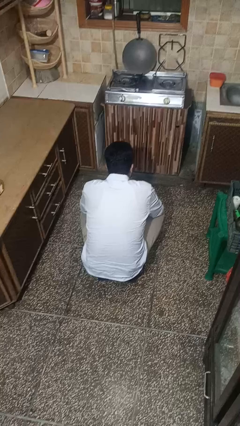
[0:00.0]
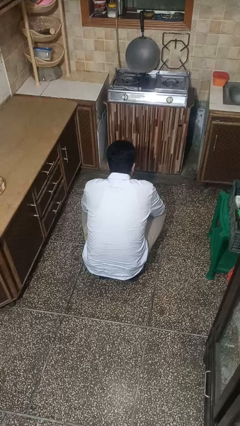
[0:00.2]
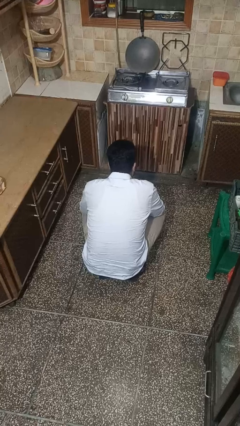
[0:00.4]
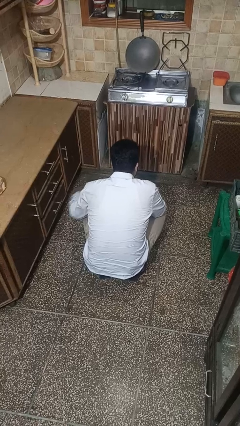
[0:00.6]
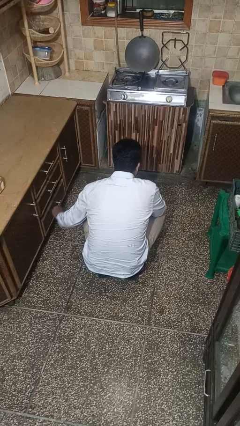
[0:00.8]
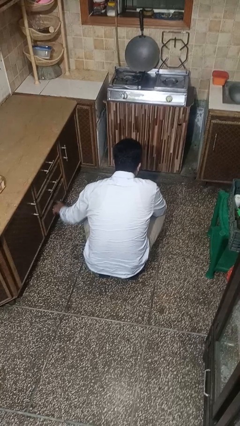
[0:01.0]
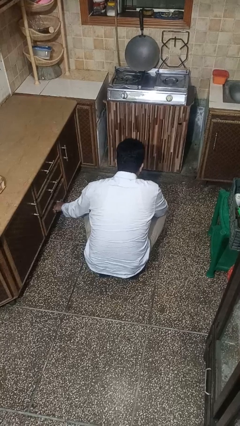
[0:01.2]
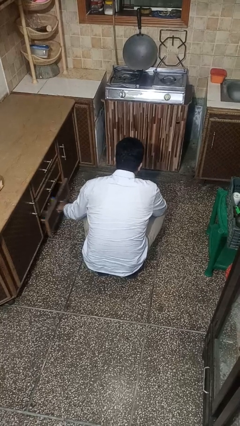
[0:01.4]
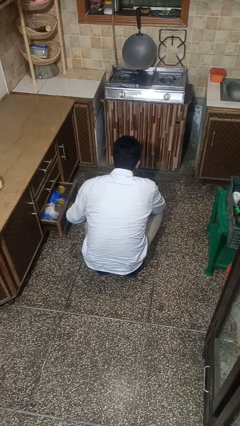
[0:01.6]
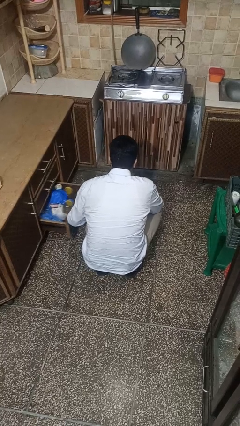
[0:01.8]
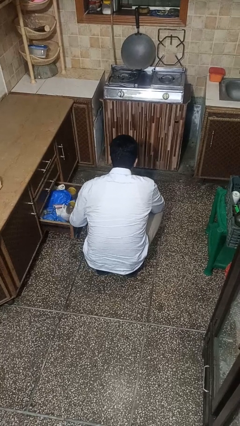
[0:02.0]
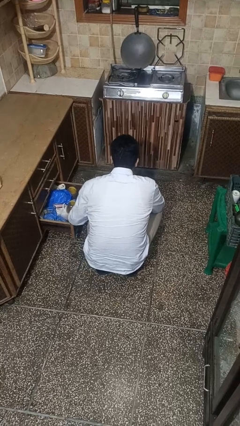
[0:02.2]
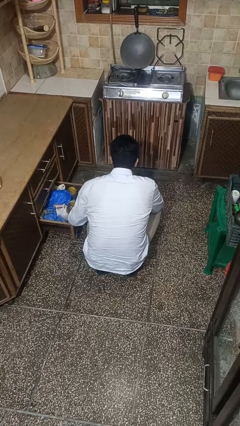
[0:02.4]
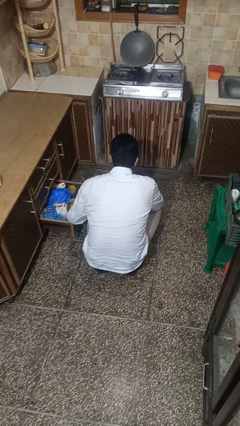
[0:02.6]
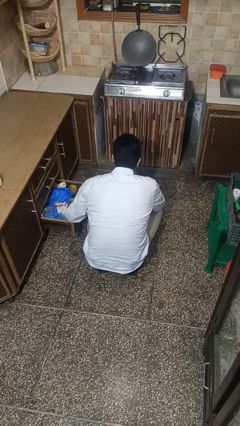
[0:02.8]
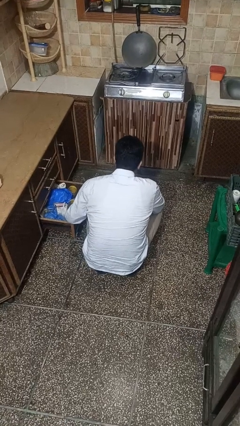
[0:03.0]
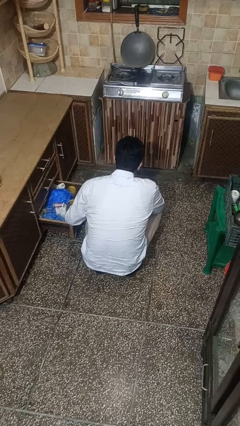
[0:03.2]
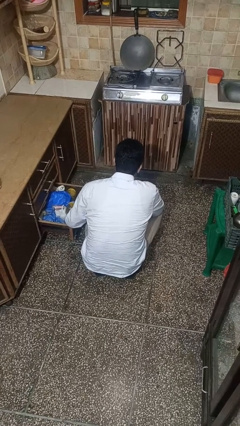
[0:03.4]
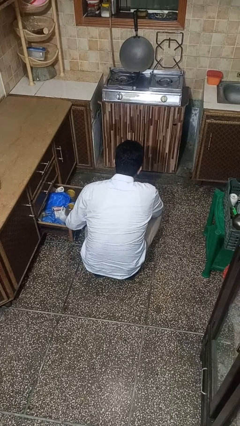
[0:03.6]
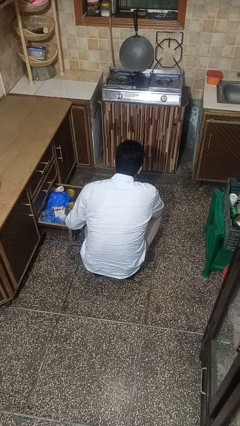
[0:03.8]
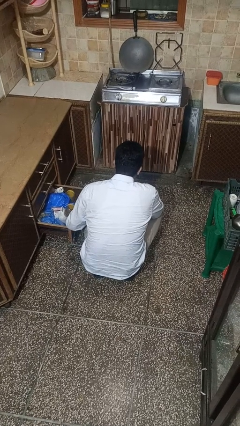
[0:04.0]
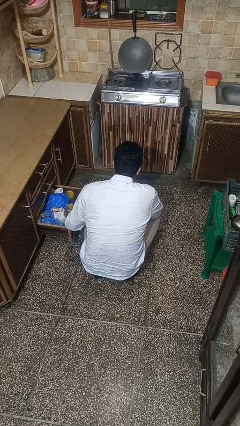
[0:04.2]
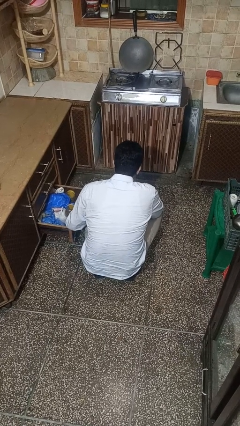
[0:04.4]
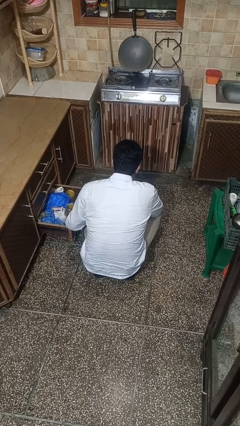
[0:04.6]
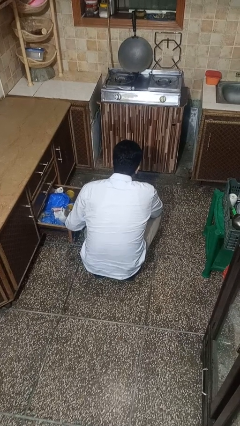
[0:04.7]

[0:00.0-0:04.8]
person opens kitchen drawer

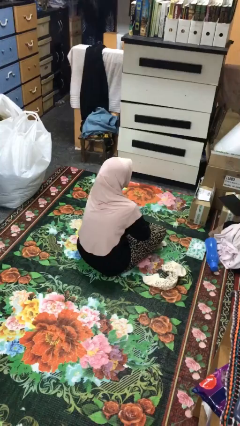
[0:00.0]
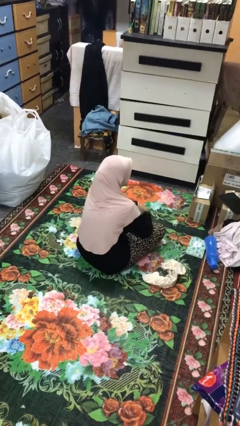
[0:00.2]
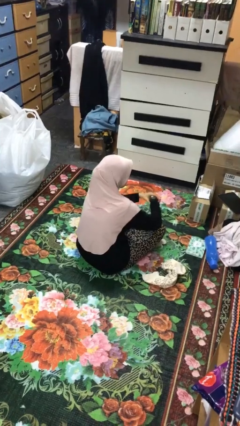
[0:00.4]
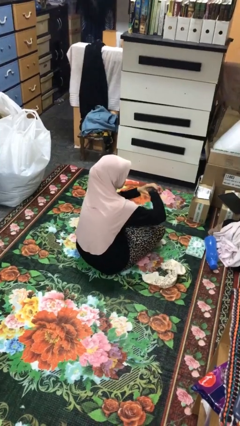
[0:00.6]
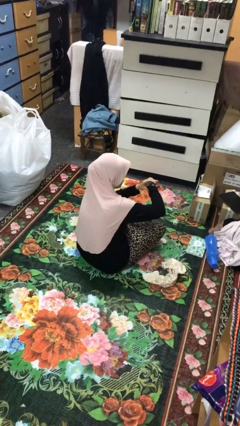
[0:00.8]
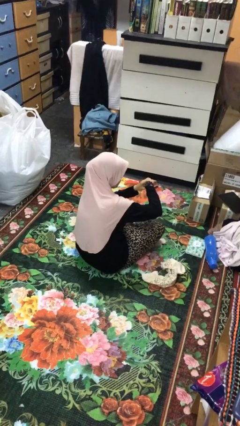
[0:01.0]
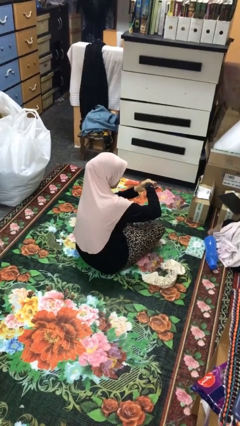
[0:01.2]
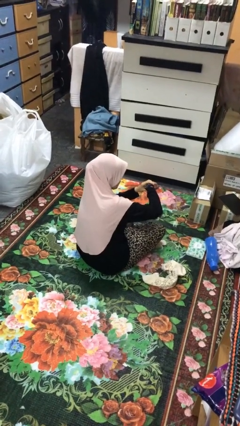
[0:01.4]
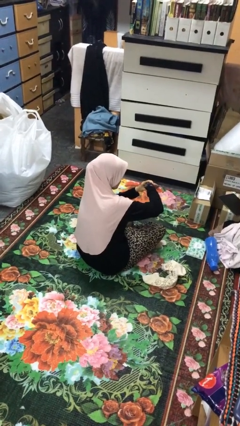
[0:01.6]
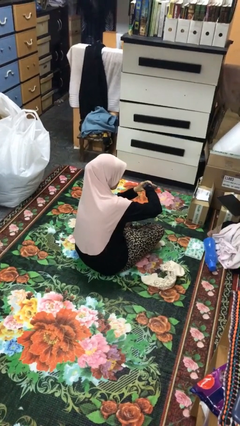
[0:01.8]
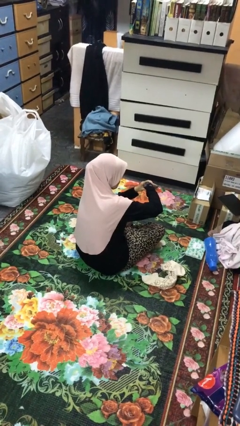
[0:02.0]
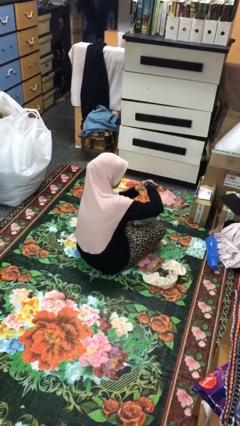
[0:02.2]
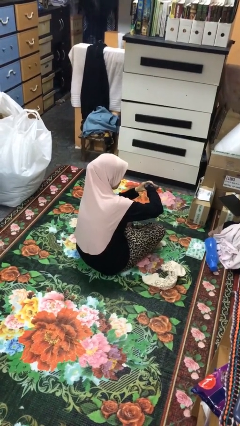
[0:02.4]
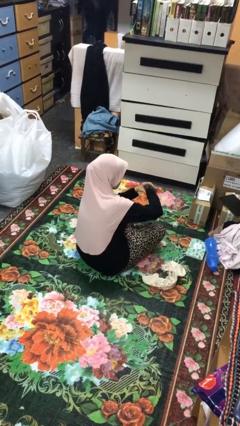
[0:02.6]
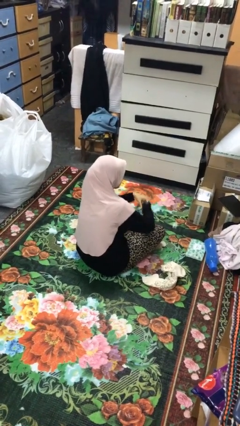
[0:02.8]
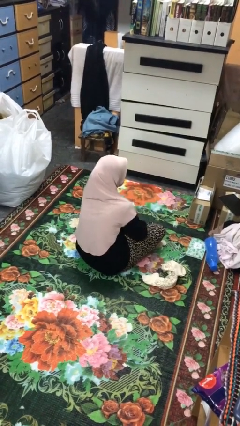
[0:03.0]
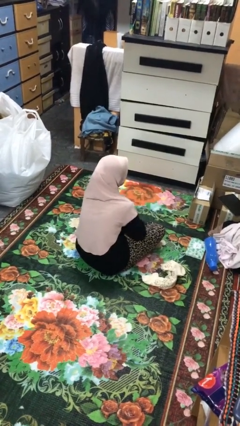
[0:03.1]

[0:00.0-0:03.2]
person looks at wristwatch

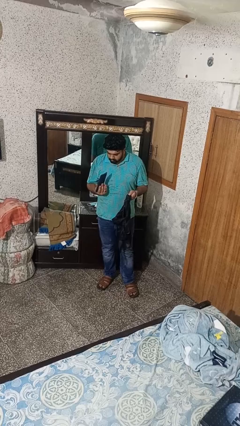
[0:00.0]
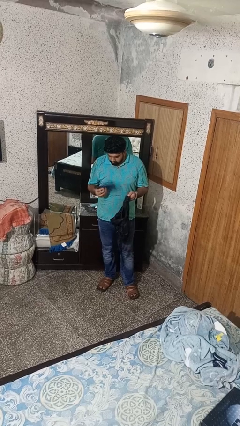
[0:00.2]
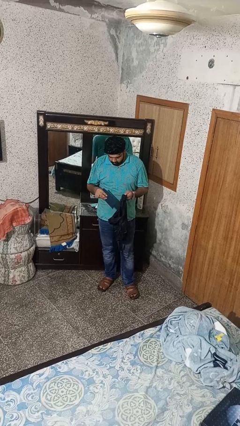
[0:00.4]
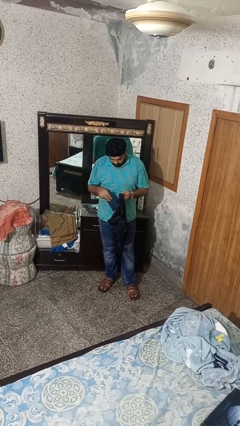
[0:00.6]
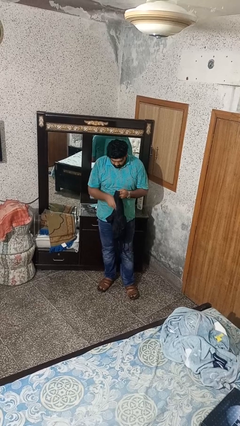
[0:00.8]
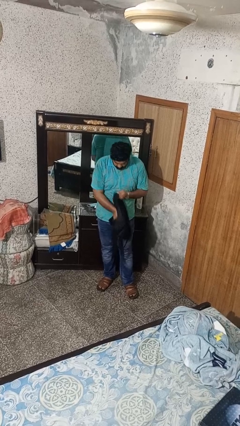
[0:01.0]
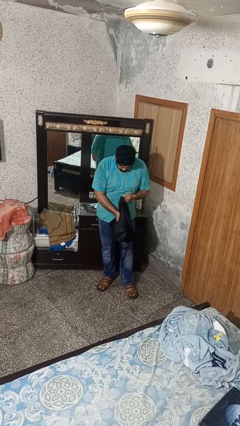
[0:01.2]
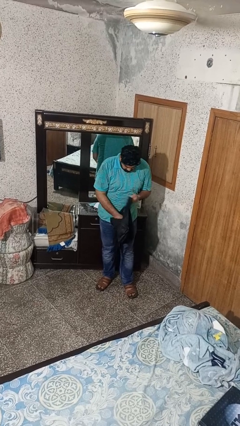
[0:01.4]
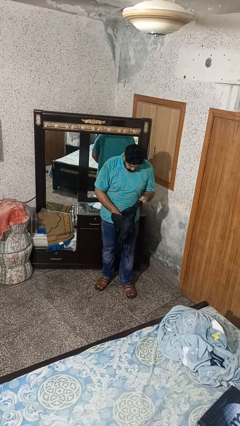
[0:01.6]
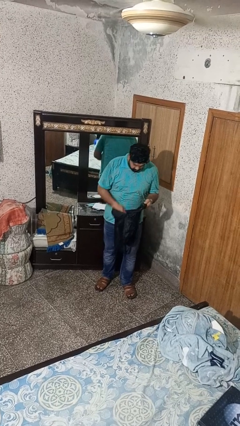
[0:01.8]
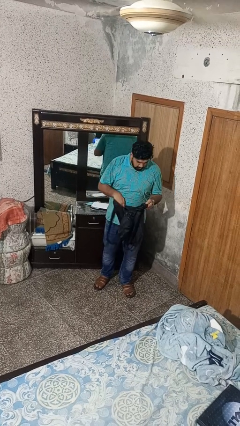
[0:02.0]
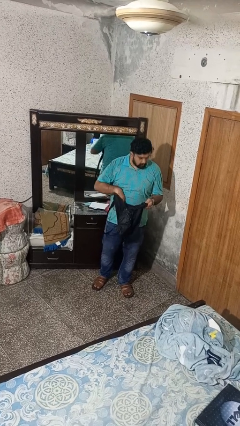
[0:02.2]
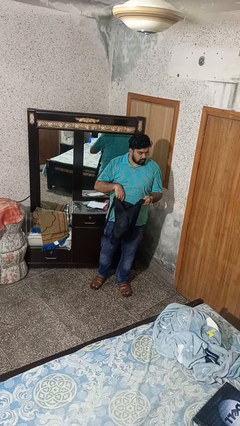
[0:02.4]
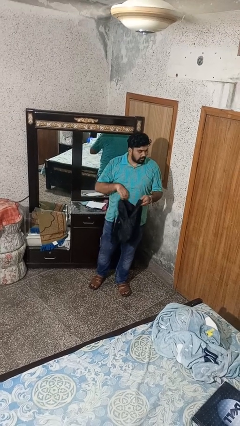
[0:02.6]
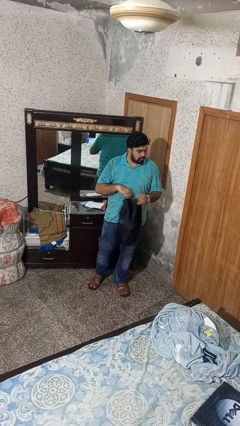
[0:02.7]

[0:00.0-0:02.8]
person puts object into backpack

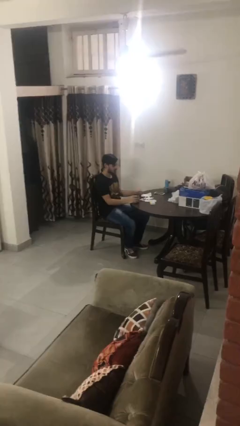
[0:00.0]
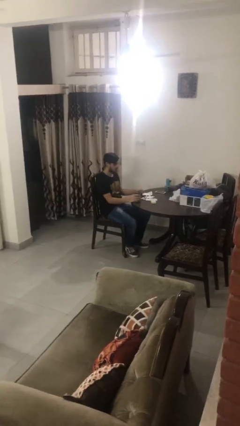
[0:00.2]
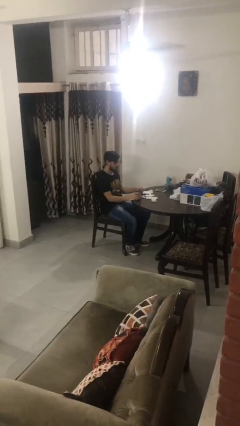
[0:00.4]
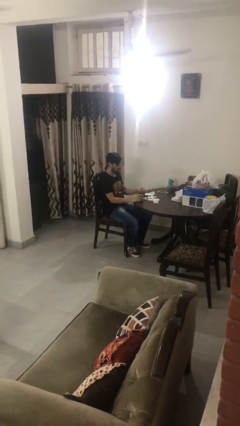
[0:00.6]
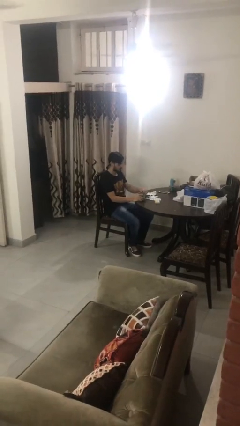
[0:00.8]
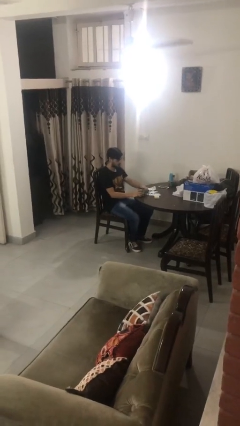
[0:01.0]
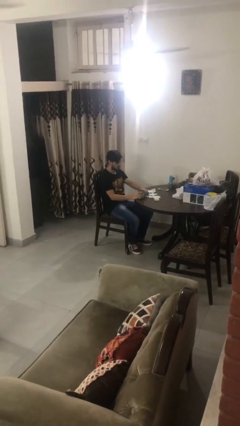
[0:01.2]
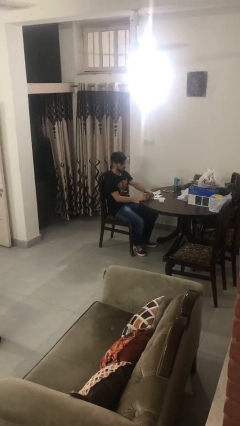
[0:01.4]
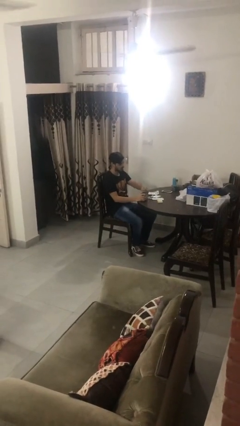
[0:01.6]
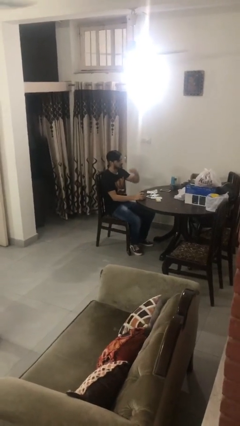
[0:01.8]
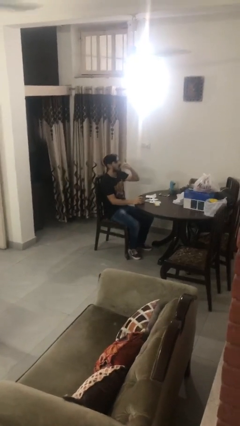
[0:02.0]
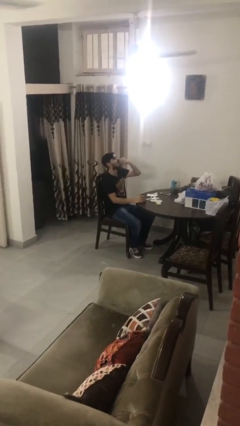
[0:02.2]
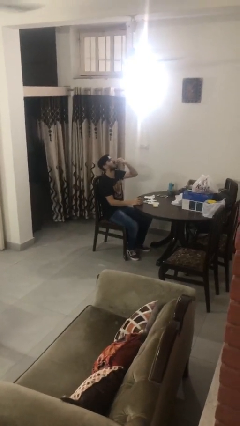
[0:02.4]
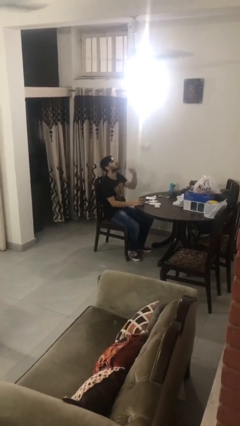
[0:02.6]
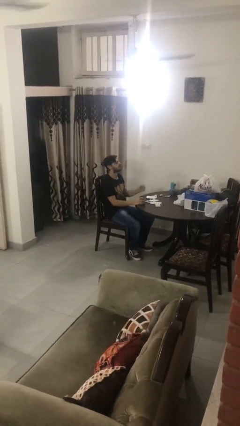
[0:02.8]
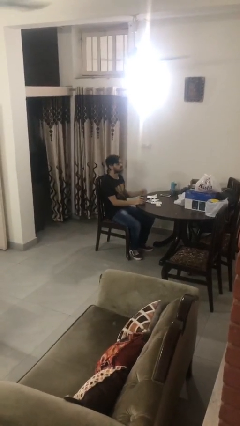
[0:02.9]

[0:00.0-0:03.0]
person takes medicine pills

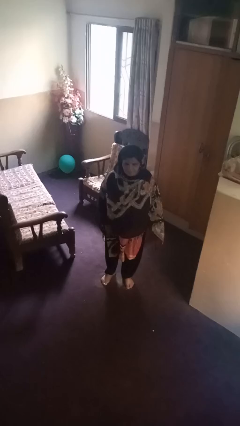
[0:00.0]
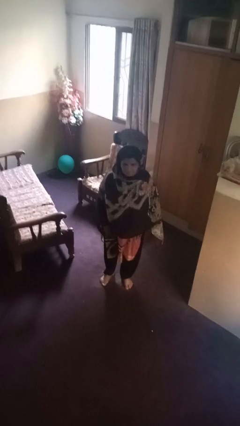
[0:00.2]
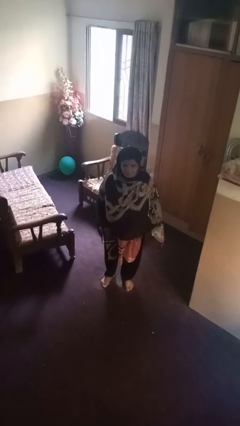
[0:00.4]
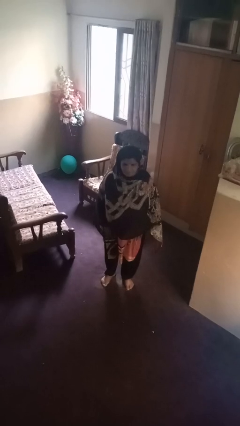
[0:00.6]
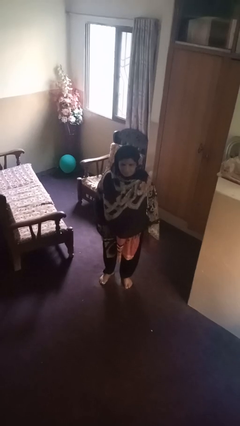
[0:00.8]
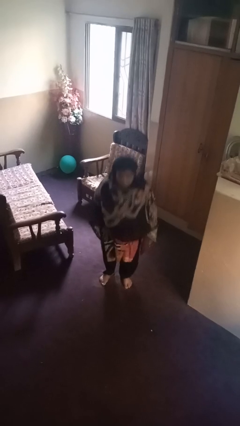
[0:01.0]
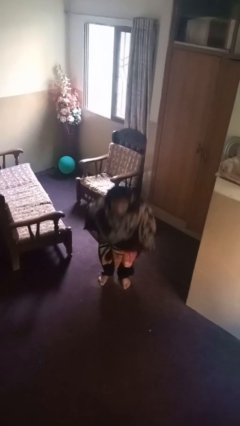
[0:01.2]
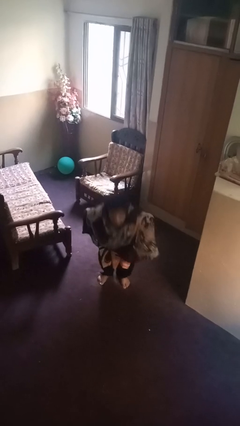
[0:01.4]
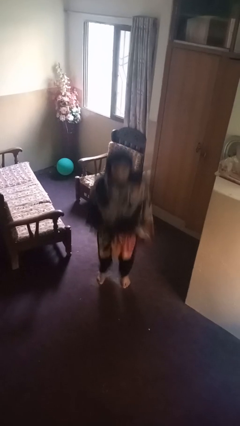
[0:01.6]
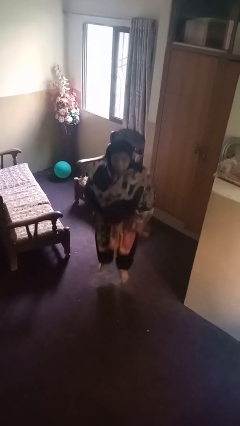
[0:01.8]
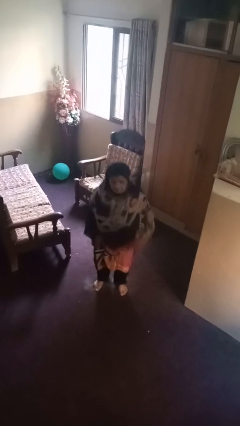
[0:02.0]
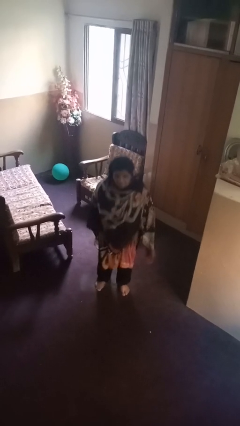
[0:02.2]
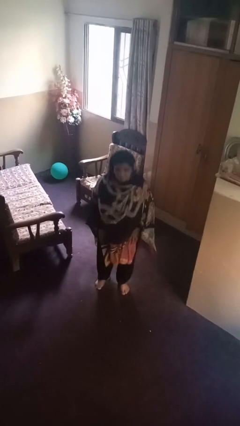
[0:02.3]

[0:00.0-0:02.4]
person jumps

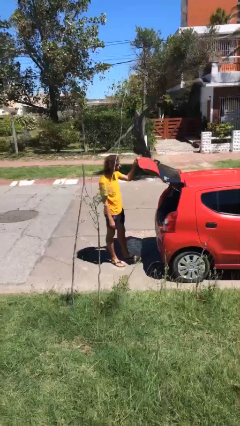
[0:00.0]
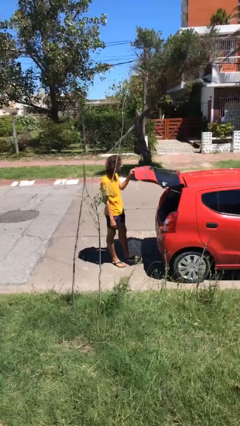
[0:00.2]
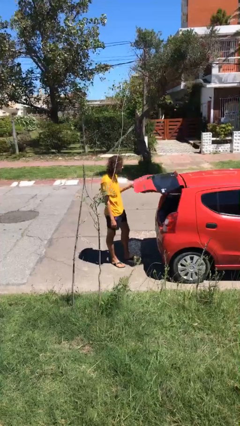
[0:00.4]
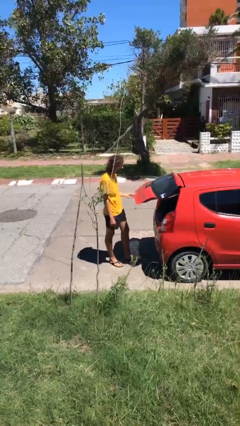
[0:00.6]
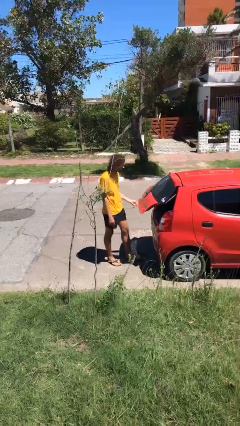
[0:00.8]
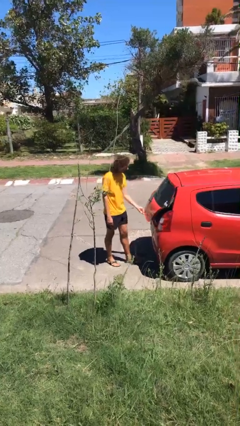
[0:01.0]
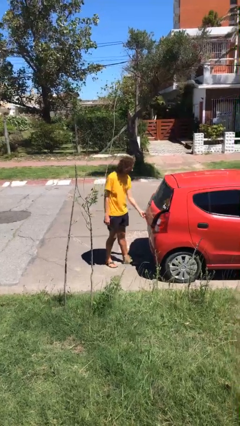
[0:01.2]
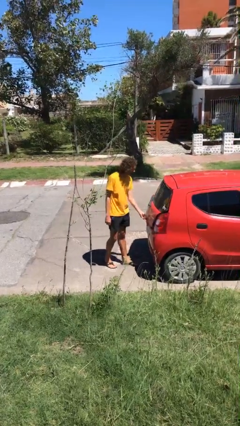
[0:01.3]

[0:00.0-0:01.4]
person closes car trunk
